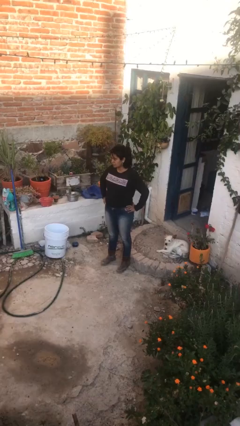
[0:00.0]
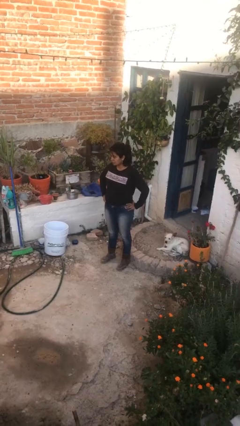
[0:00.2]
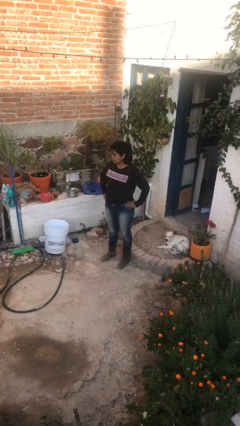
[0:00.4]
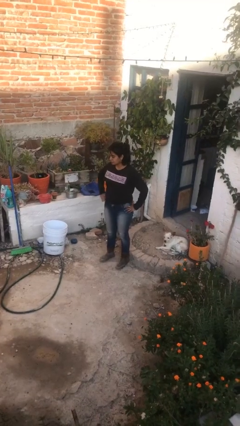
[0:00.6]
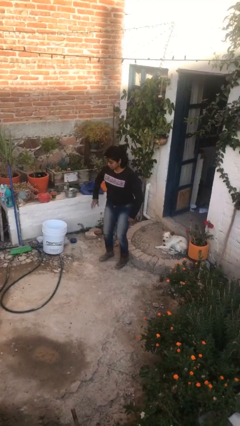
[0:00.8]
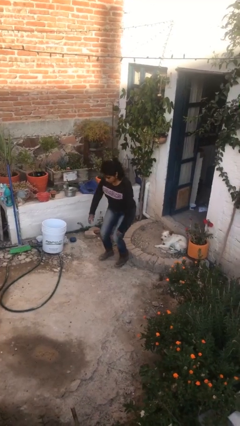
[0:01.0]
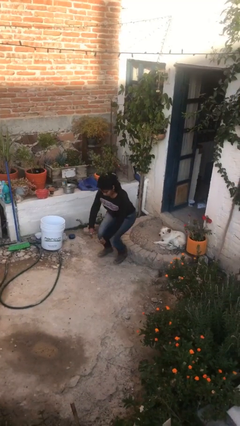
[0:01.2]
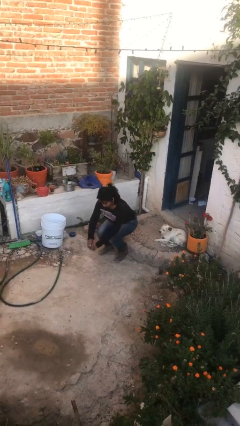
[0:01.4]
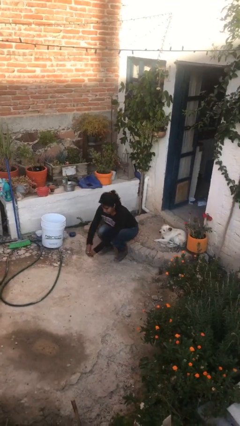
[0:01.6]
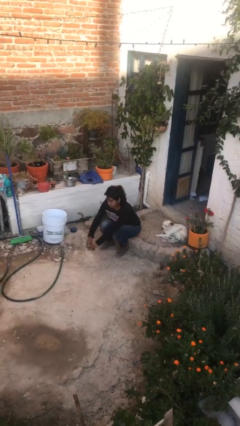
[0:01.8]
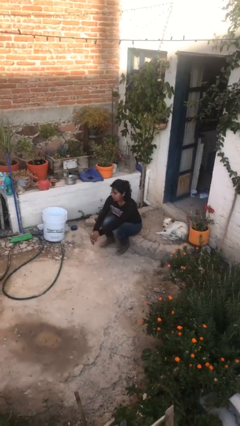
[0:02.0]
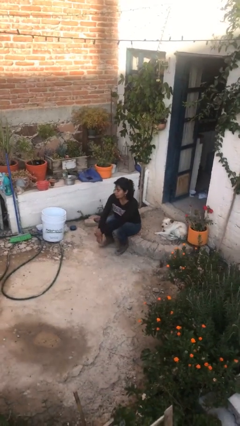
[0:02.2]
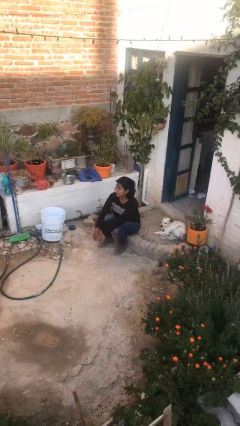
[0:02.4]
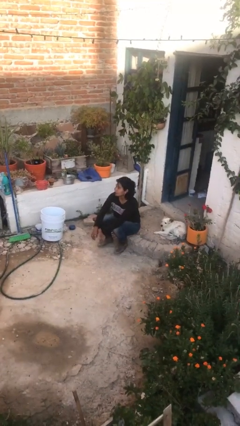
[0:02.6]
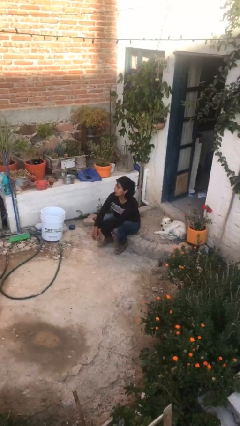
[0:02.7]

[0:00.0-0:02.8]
person sits down

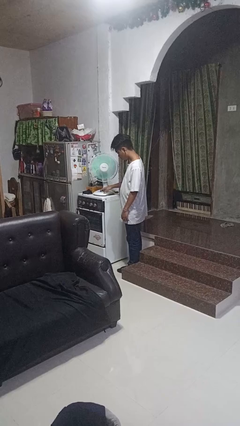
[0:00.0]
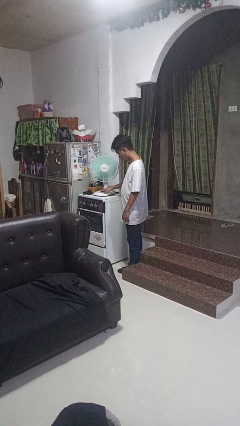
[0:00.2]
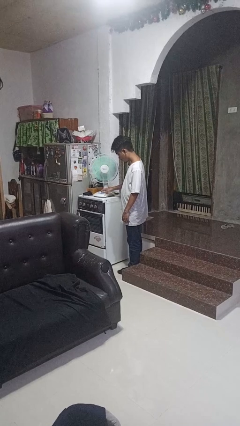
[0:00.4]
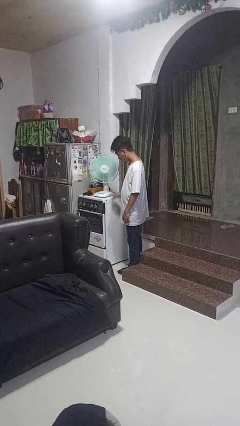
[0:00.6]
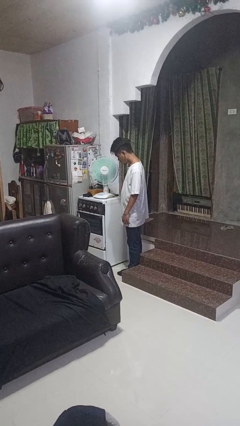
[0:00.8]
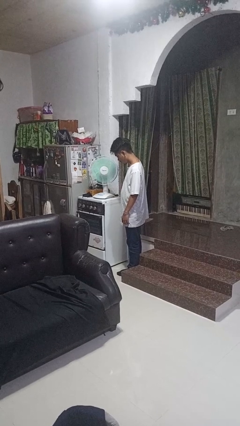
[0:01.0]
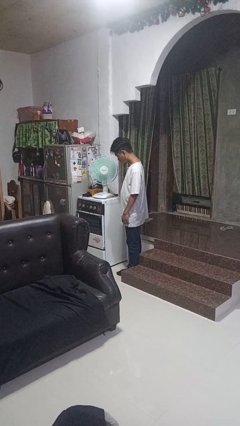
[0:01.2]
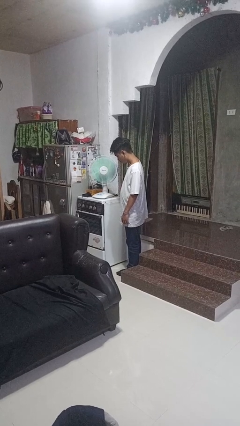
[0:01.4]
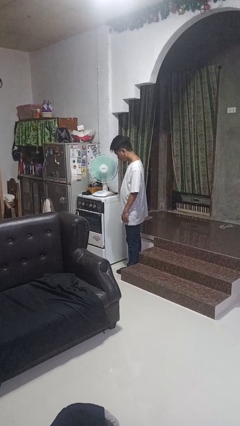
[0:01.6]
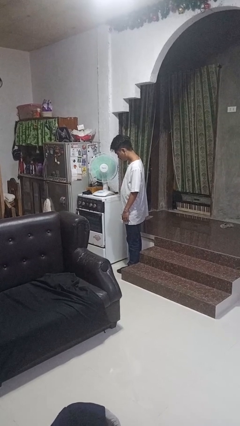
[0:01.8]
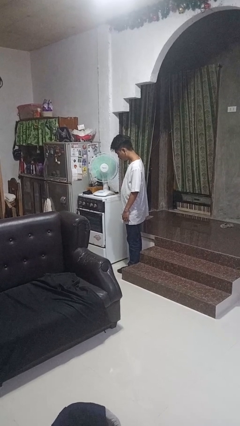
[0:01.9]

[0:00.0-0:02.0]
person turns on fan

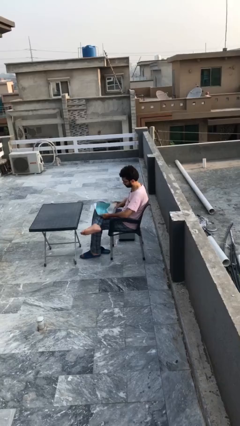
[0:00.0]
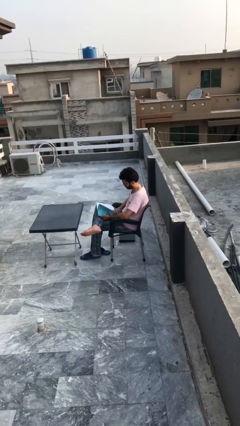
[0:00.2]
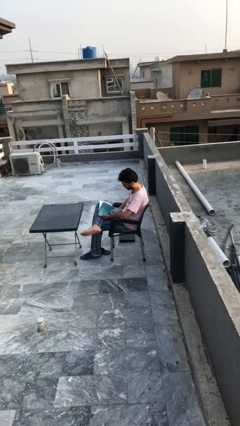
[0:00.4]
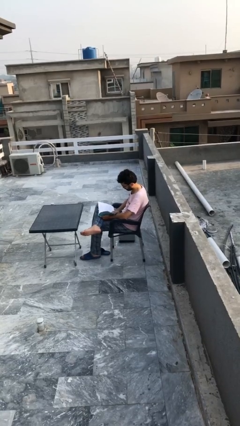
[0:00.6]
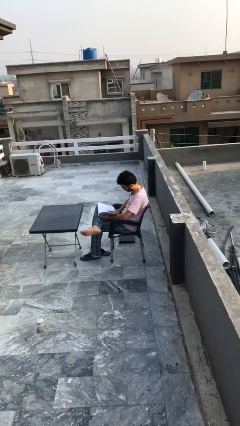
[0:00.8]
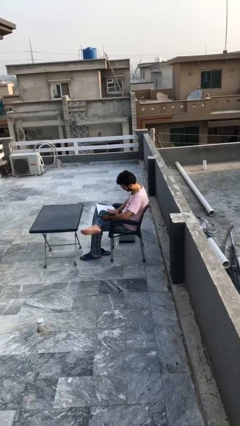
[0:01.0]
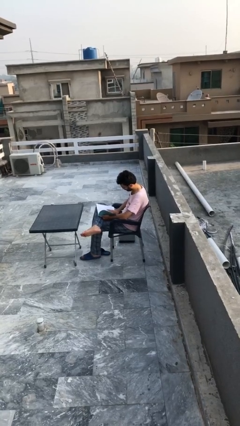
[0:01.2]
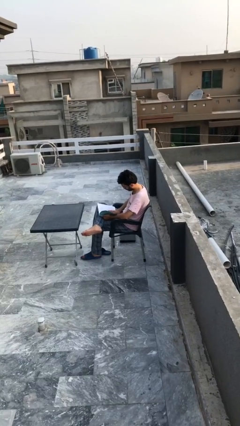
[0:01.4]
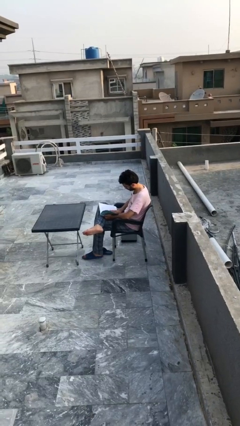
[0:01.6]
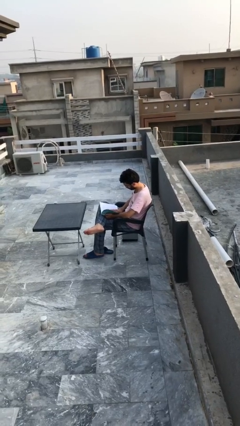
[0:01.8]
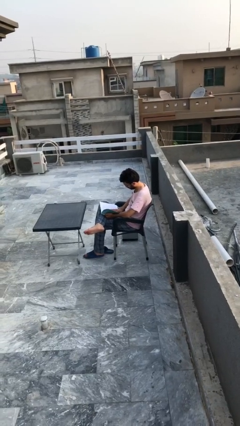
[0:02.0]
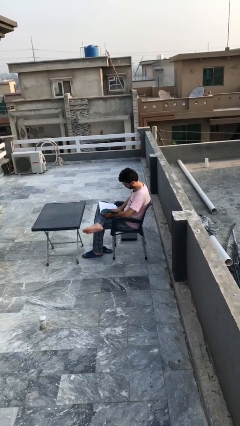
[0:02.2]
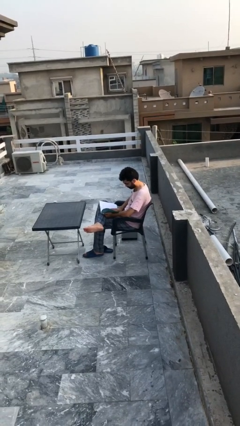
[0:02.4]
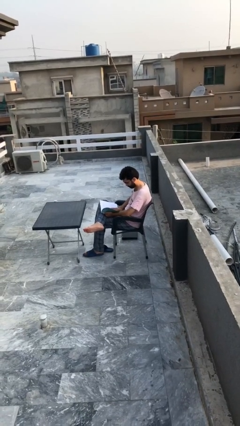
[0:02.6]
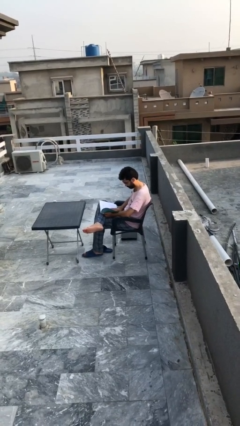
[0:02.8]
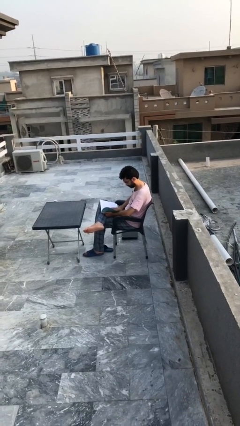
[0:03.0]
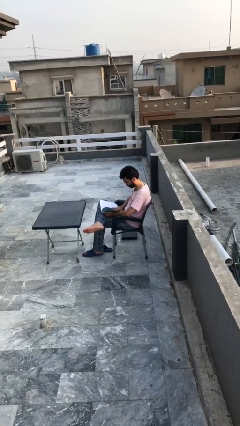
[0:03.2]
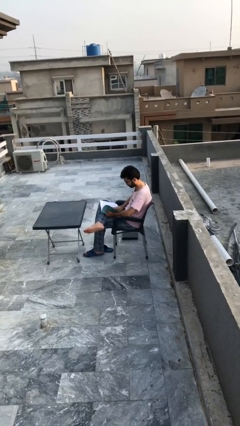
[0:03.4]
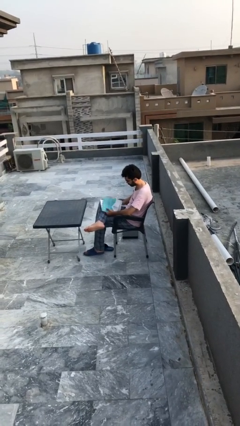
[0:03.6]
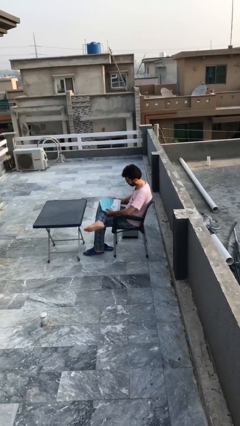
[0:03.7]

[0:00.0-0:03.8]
person reads document

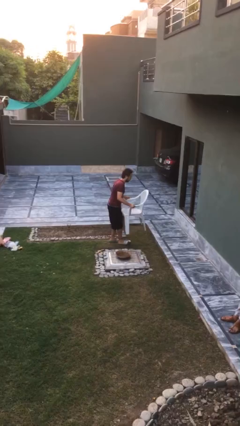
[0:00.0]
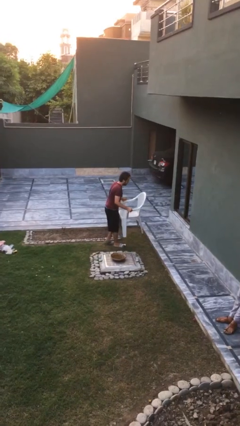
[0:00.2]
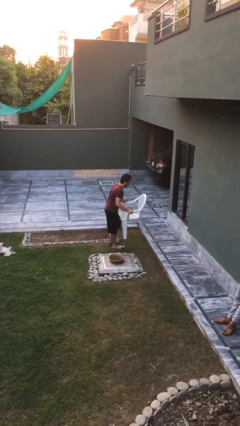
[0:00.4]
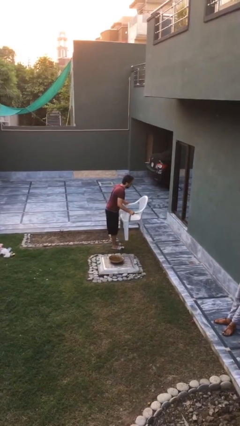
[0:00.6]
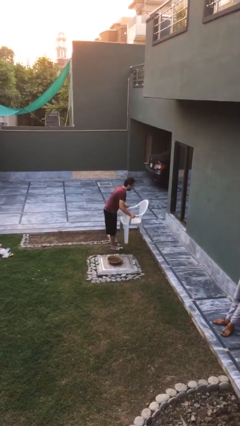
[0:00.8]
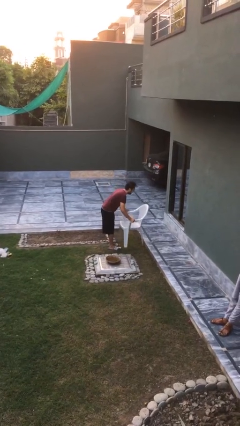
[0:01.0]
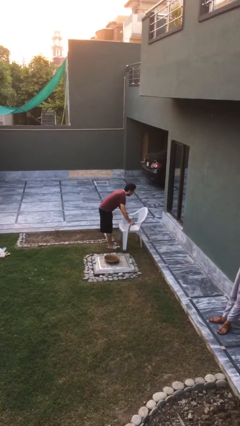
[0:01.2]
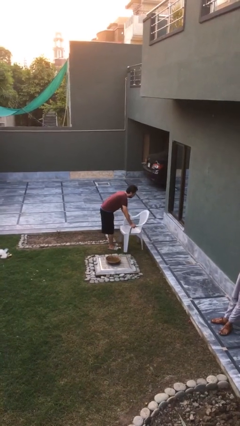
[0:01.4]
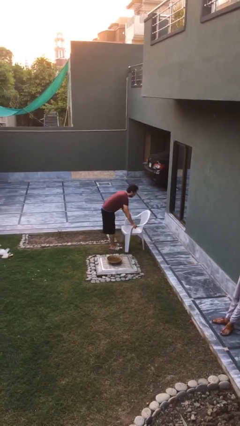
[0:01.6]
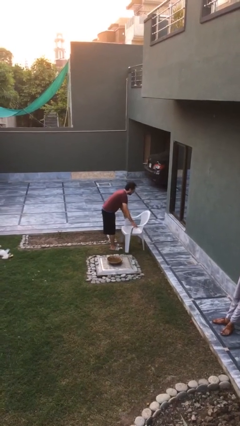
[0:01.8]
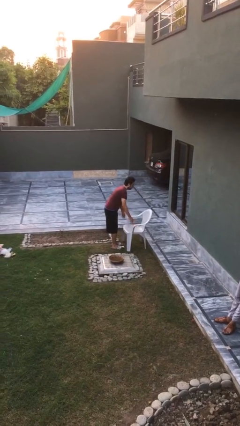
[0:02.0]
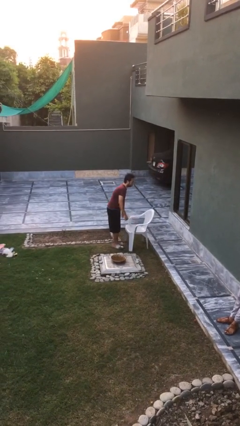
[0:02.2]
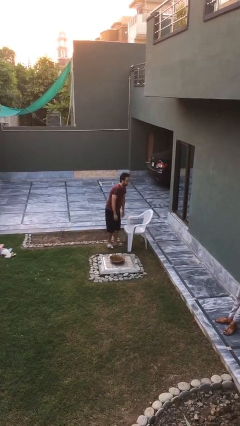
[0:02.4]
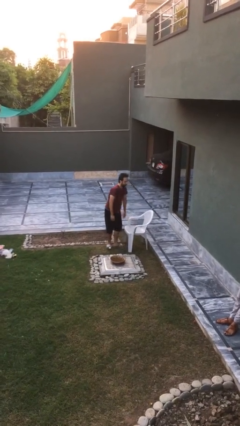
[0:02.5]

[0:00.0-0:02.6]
person puts down object on floor

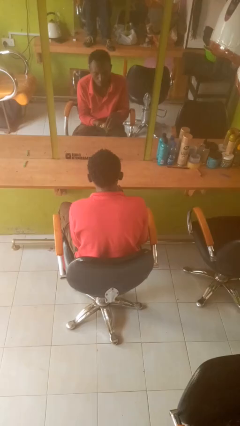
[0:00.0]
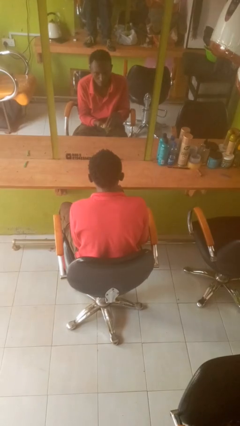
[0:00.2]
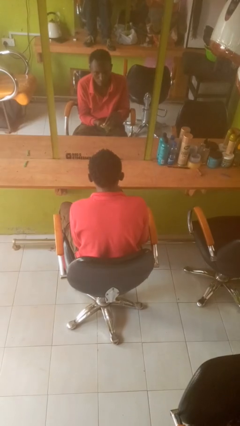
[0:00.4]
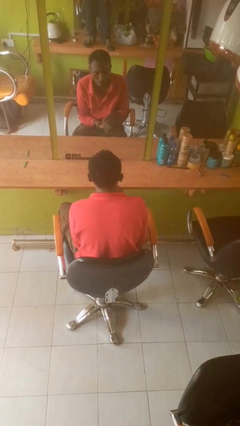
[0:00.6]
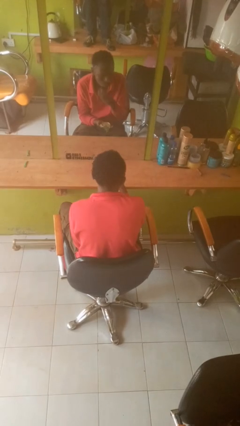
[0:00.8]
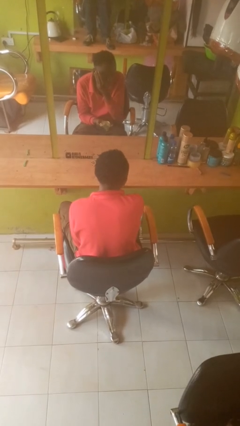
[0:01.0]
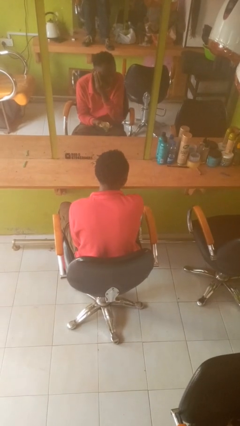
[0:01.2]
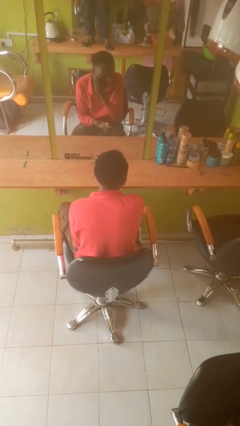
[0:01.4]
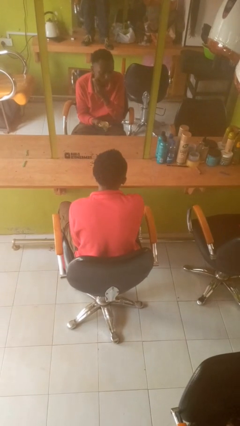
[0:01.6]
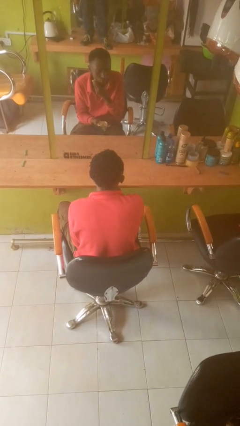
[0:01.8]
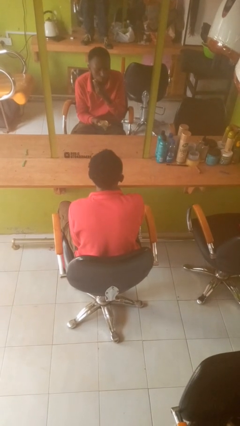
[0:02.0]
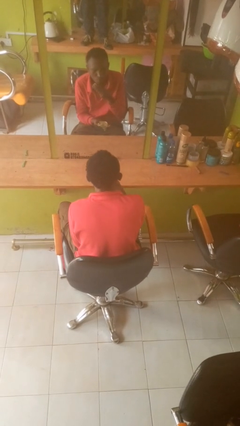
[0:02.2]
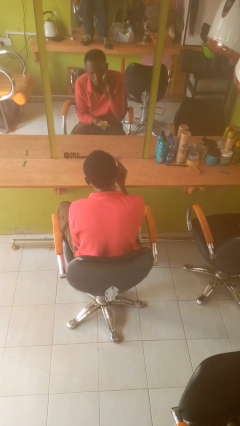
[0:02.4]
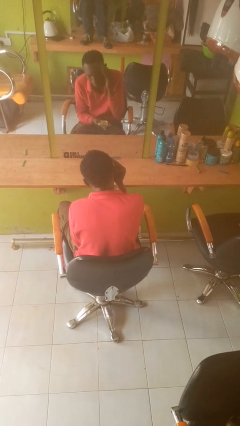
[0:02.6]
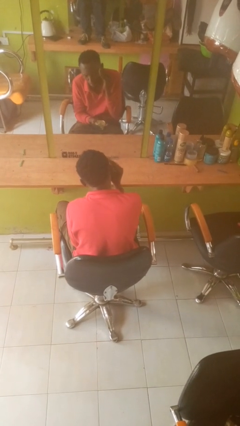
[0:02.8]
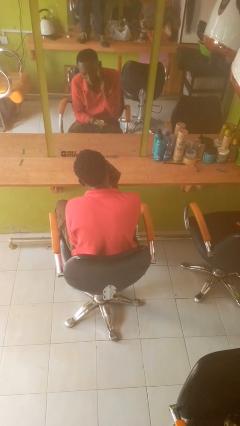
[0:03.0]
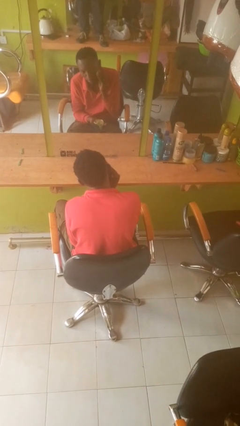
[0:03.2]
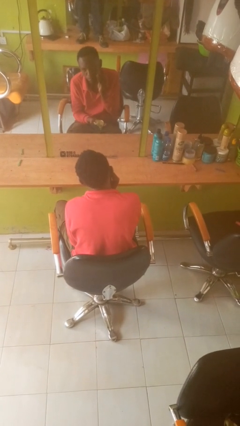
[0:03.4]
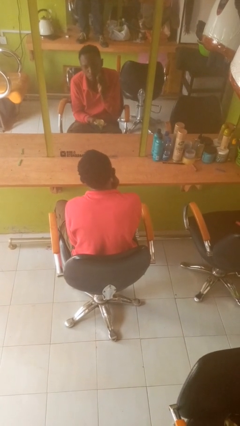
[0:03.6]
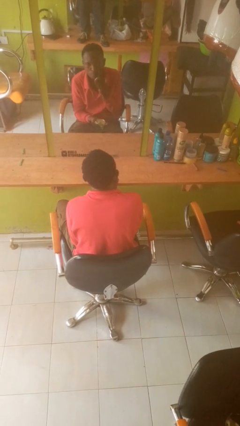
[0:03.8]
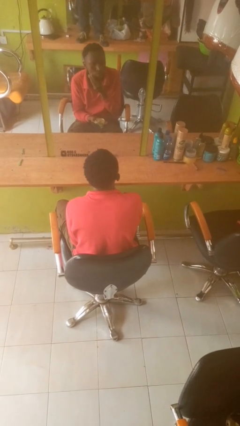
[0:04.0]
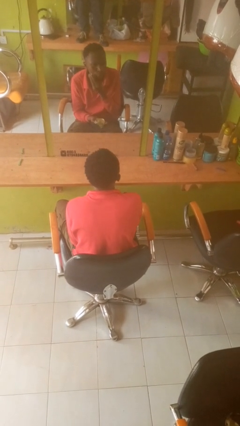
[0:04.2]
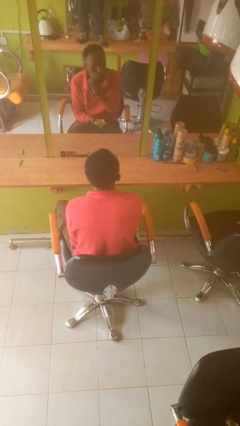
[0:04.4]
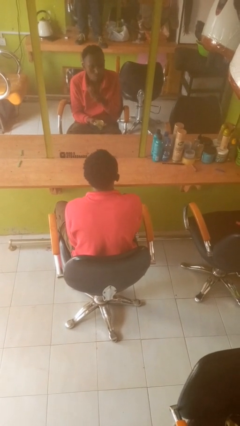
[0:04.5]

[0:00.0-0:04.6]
person applies foundation makeup

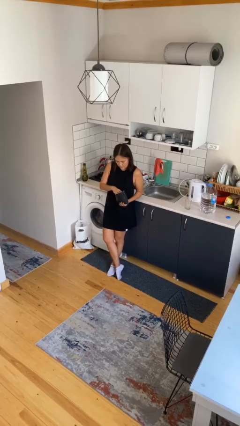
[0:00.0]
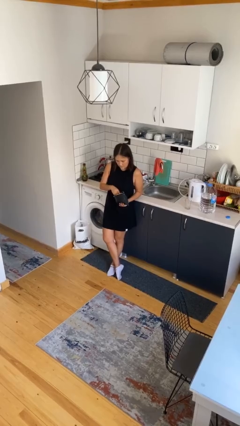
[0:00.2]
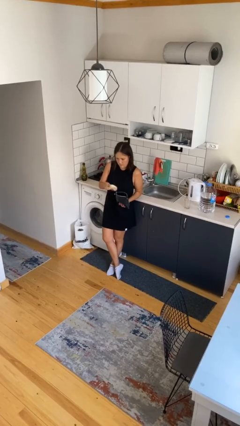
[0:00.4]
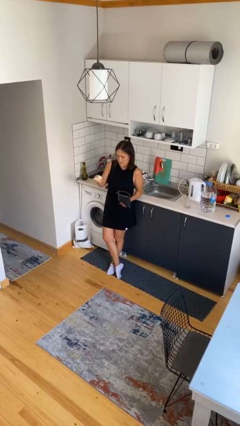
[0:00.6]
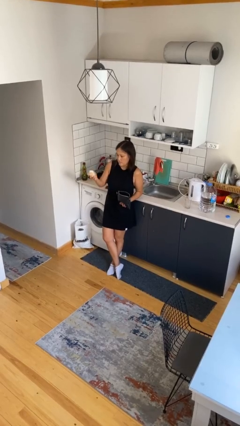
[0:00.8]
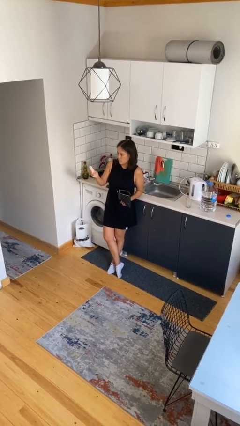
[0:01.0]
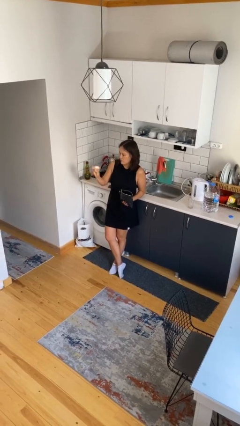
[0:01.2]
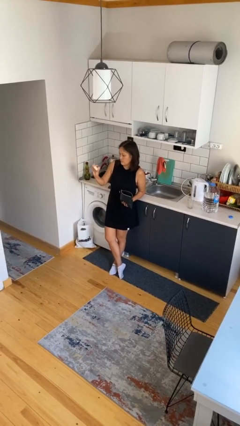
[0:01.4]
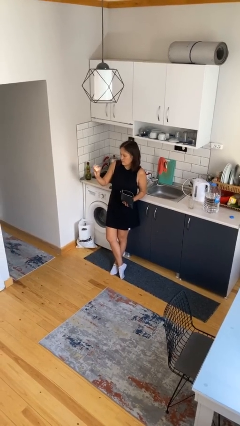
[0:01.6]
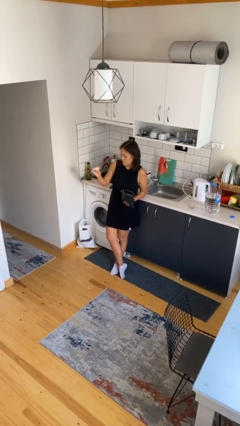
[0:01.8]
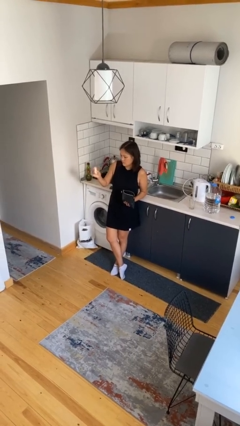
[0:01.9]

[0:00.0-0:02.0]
person takes object from purse
